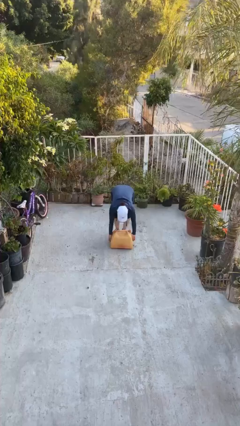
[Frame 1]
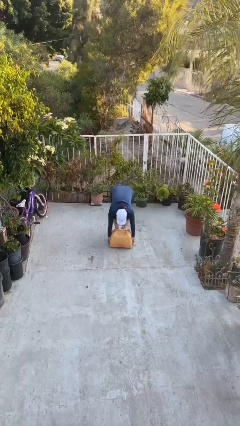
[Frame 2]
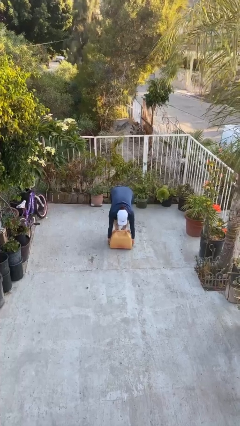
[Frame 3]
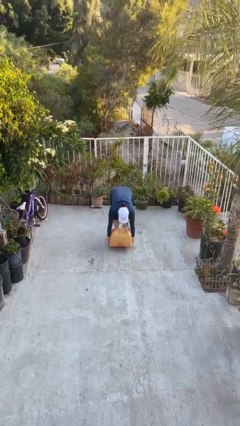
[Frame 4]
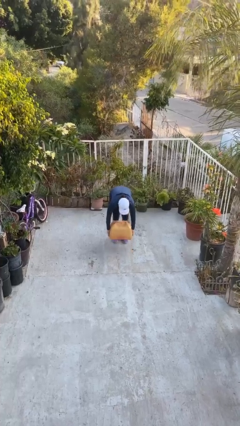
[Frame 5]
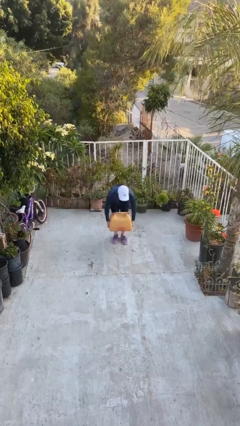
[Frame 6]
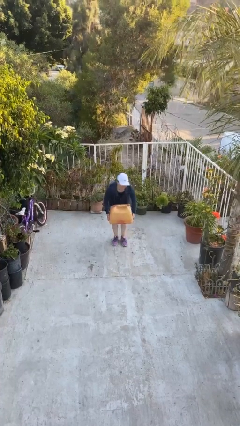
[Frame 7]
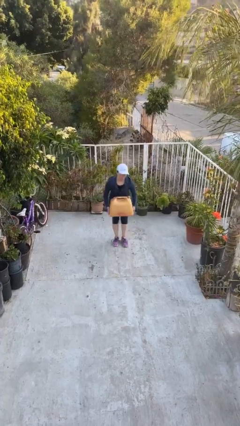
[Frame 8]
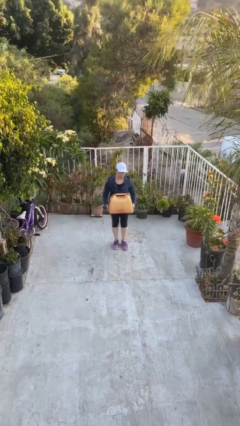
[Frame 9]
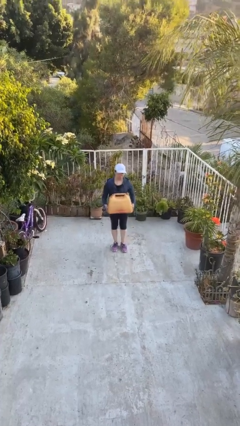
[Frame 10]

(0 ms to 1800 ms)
person picks up object from floor

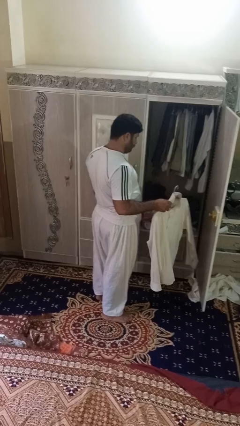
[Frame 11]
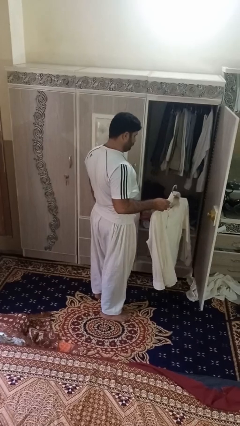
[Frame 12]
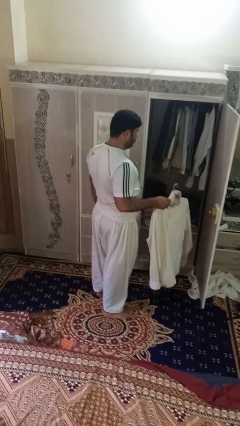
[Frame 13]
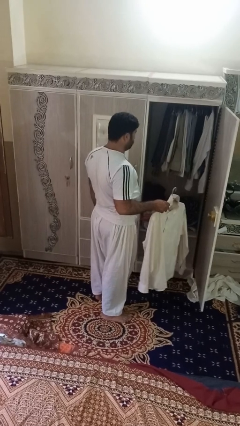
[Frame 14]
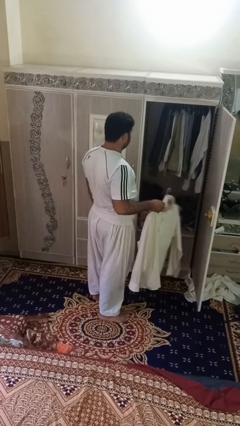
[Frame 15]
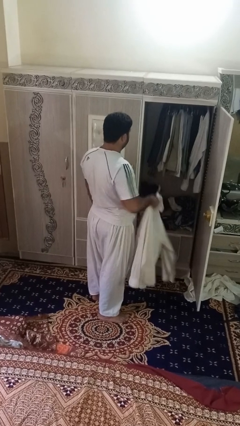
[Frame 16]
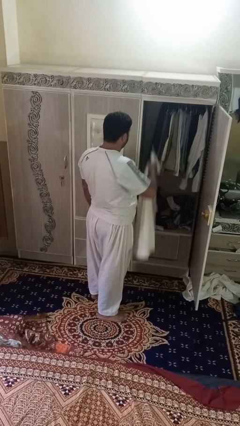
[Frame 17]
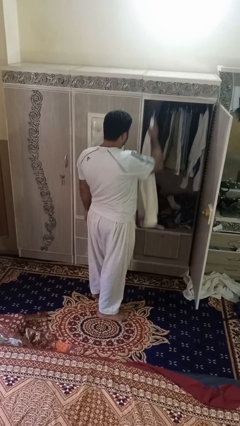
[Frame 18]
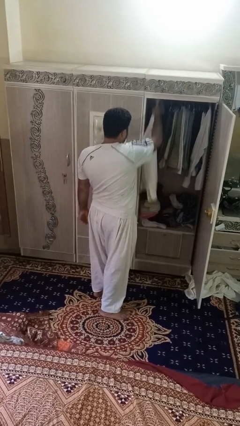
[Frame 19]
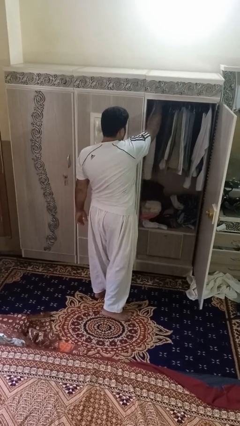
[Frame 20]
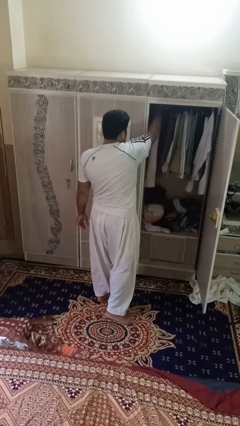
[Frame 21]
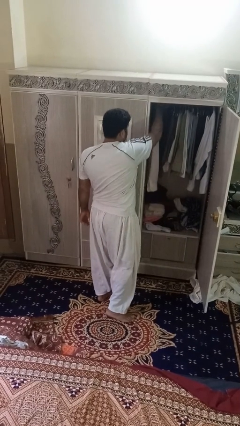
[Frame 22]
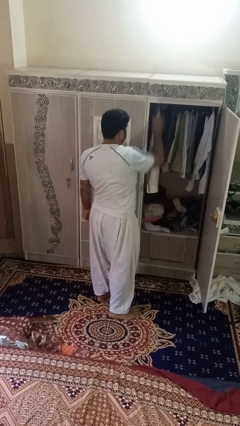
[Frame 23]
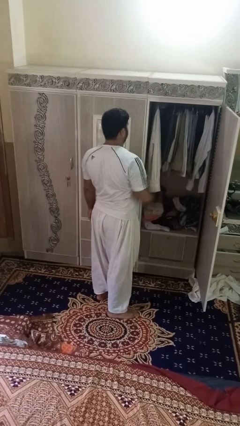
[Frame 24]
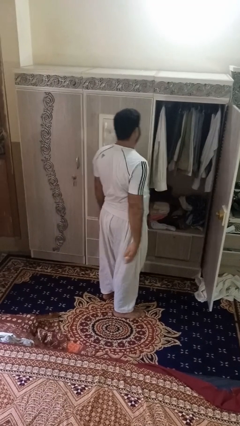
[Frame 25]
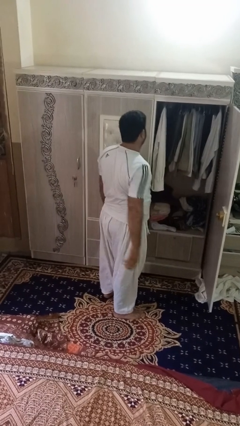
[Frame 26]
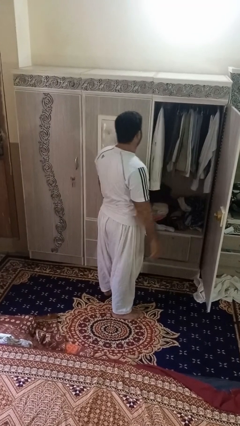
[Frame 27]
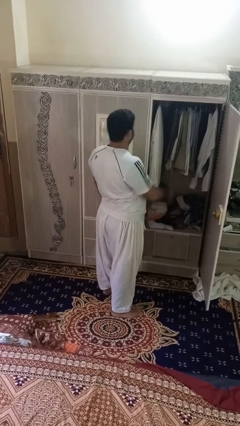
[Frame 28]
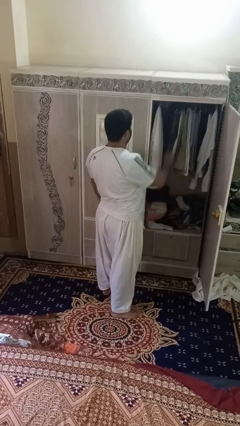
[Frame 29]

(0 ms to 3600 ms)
person puts clothes into closet

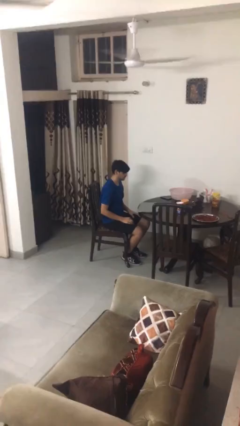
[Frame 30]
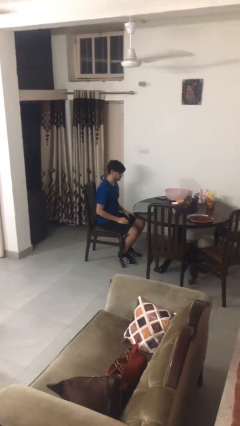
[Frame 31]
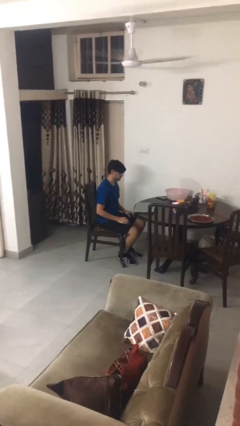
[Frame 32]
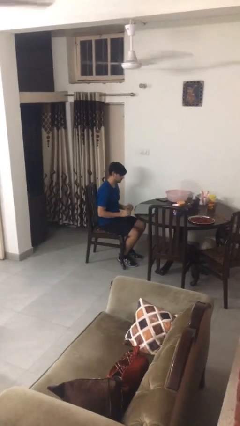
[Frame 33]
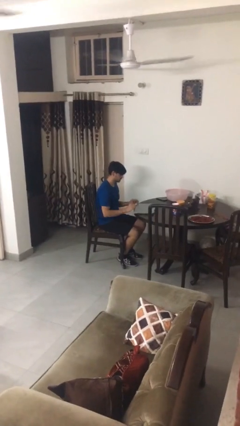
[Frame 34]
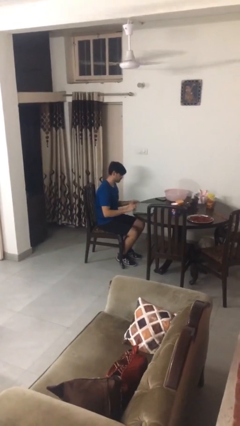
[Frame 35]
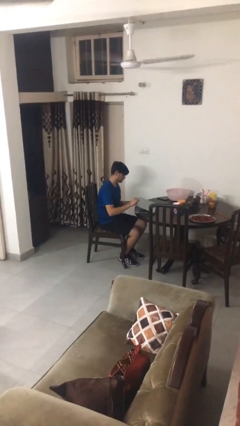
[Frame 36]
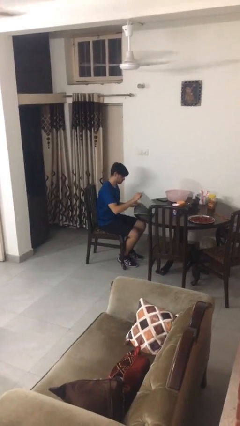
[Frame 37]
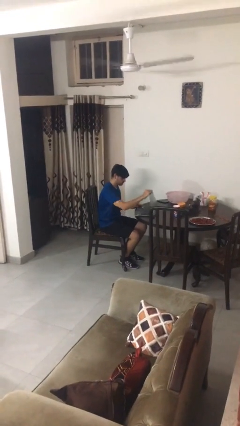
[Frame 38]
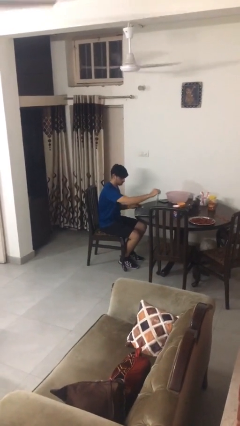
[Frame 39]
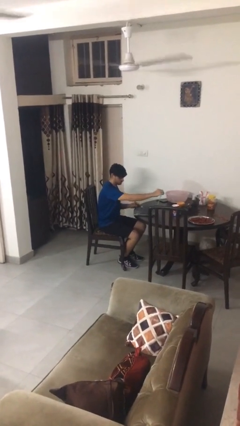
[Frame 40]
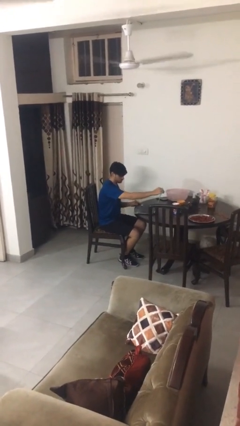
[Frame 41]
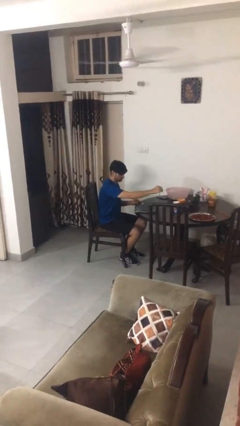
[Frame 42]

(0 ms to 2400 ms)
person opens laptop

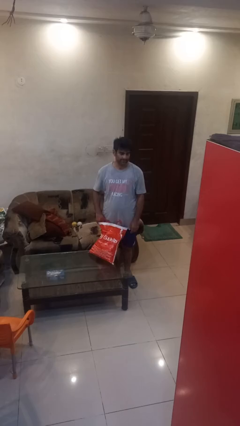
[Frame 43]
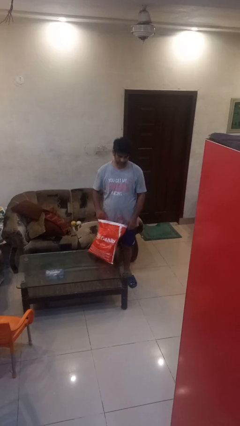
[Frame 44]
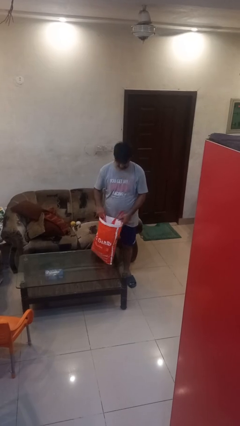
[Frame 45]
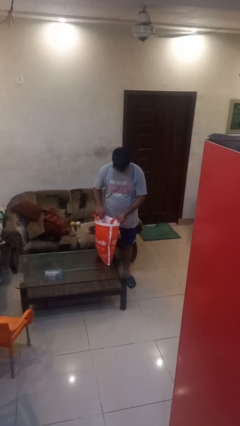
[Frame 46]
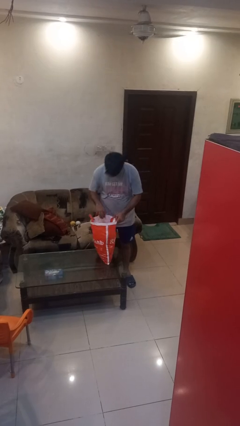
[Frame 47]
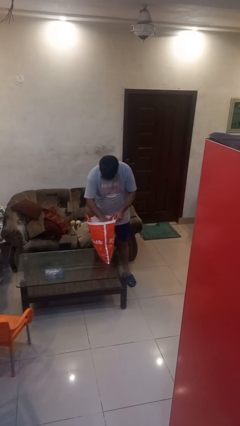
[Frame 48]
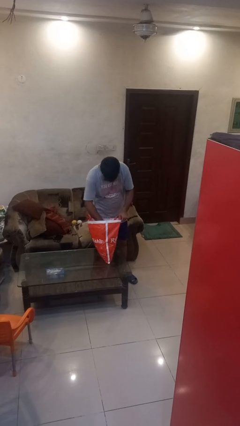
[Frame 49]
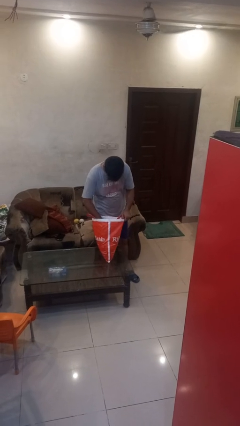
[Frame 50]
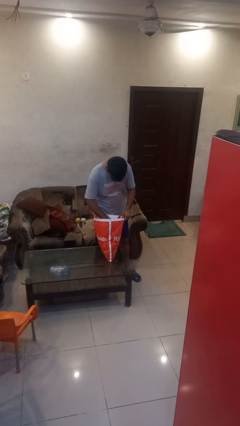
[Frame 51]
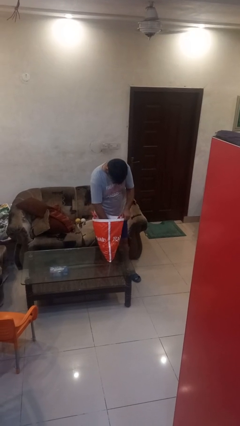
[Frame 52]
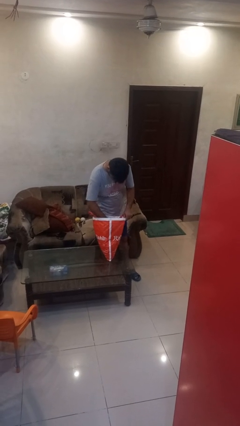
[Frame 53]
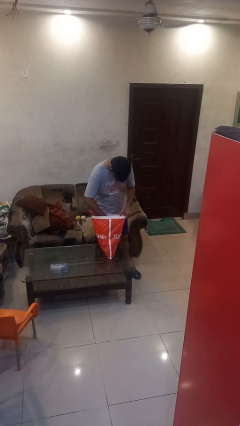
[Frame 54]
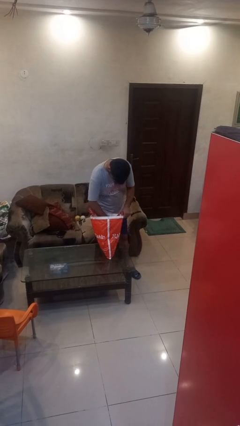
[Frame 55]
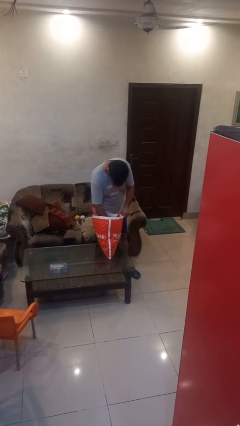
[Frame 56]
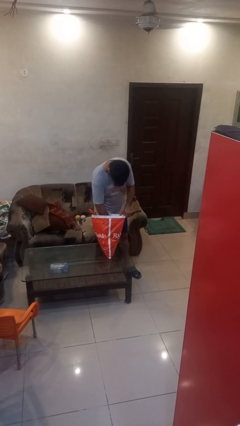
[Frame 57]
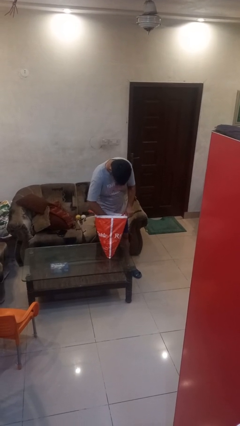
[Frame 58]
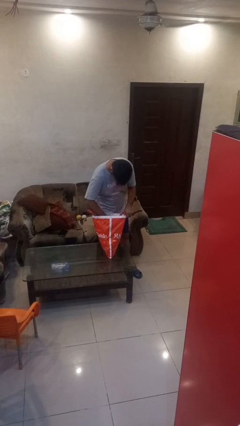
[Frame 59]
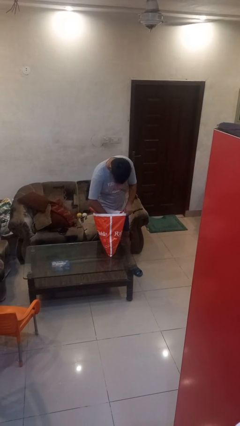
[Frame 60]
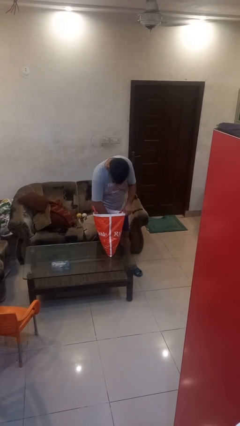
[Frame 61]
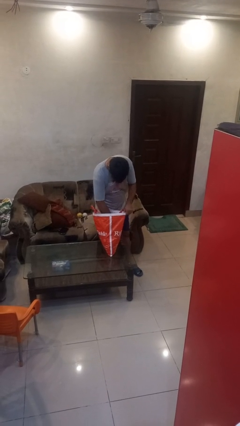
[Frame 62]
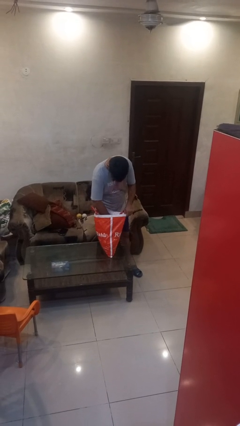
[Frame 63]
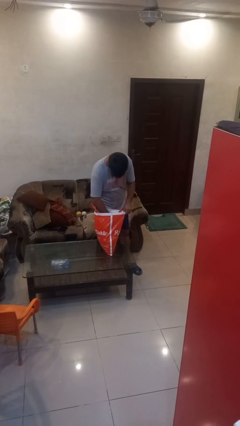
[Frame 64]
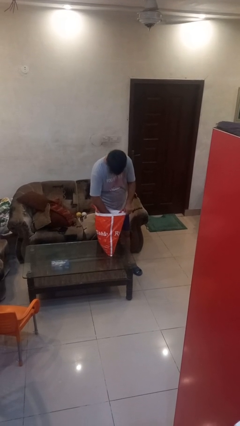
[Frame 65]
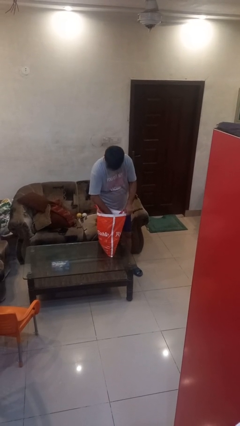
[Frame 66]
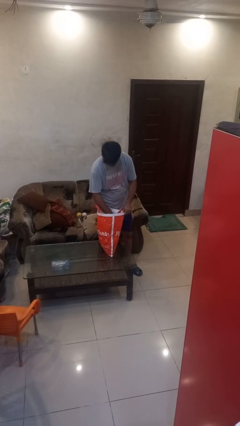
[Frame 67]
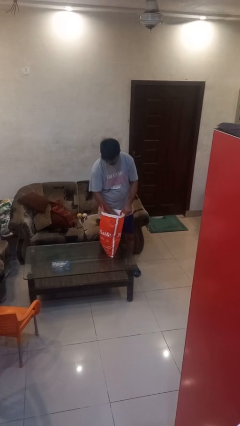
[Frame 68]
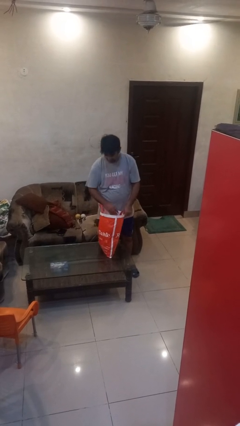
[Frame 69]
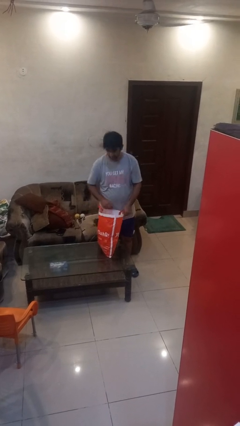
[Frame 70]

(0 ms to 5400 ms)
person searches in bag

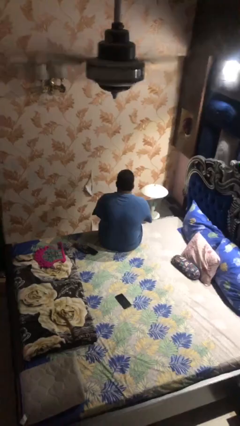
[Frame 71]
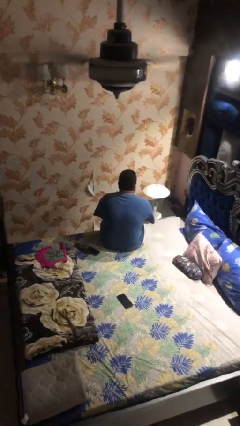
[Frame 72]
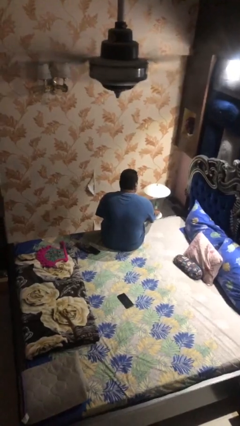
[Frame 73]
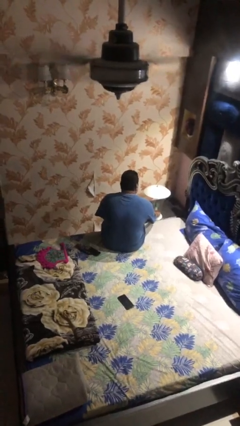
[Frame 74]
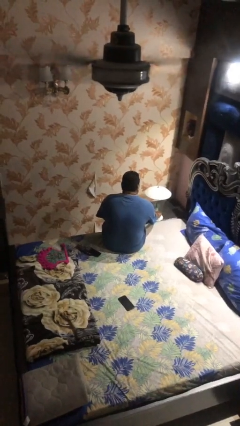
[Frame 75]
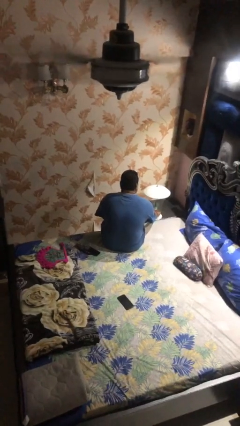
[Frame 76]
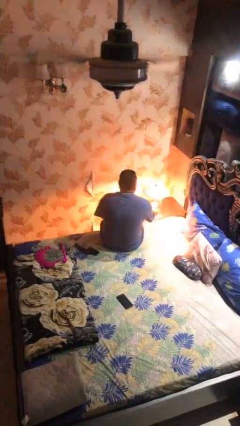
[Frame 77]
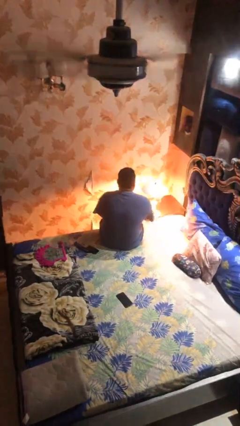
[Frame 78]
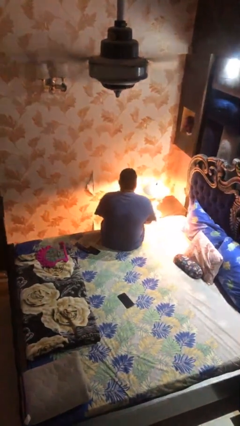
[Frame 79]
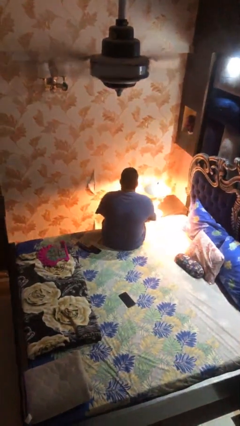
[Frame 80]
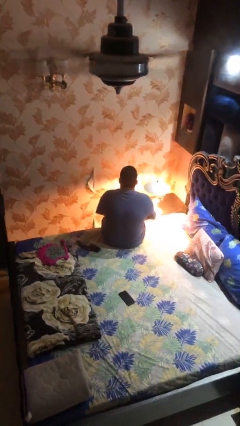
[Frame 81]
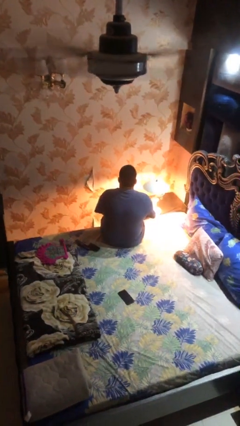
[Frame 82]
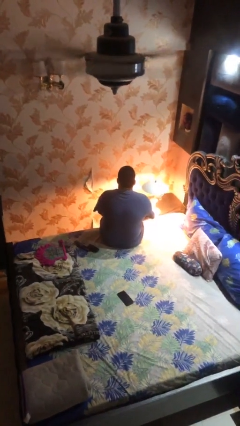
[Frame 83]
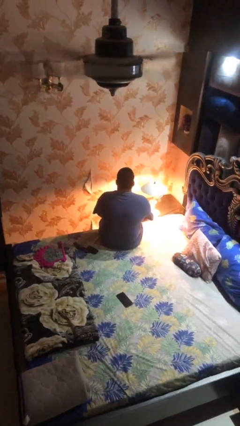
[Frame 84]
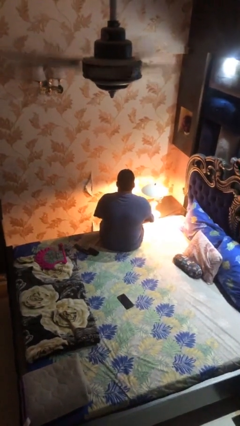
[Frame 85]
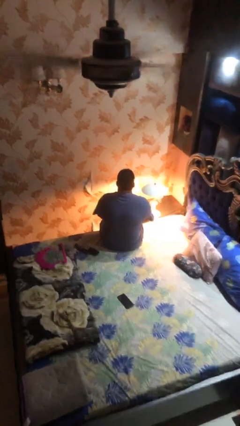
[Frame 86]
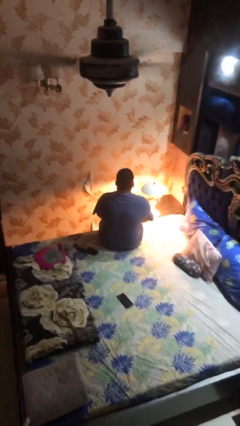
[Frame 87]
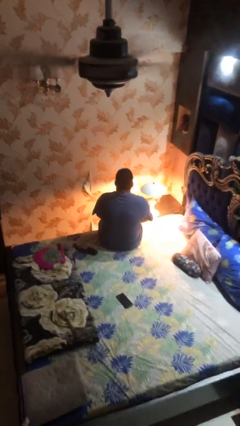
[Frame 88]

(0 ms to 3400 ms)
person turns on lamp

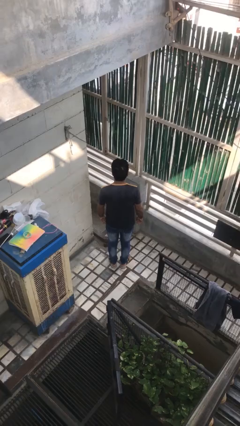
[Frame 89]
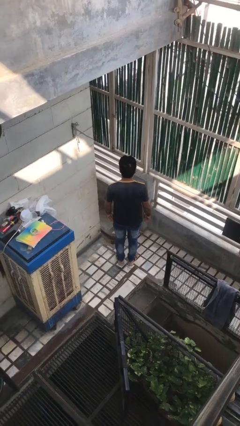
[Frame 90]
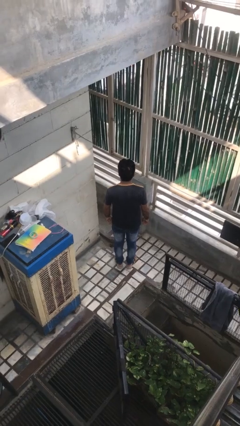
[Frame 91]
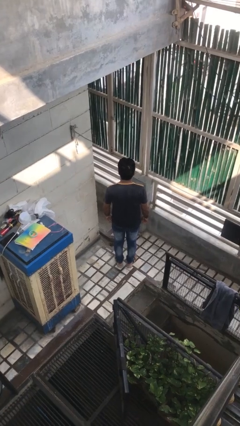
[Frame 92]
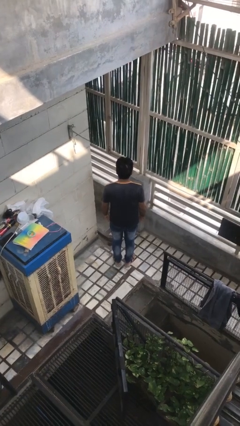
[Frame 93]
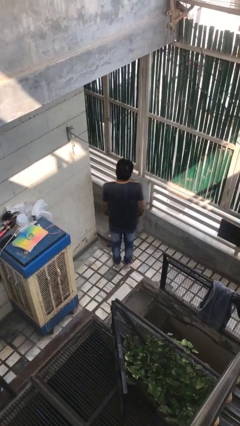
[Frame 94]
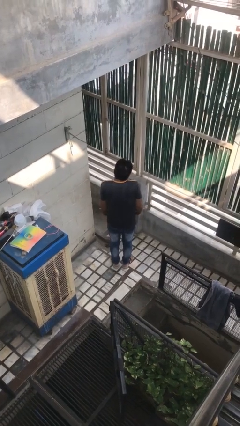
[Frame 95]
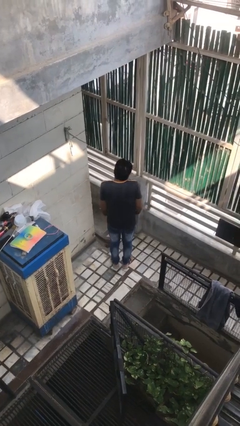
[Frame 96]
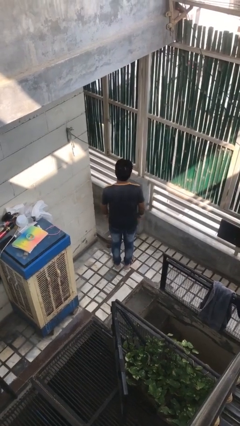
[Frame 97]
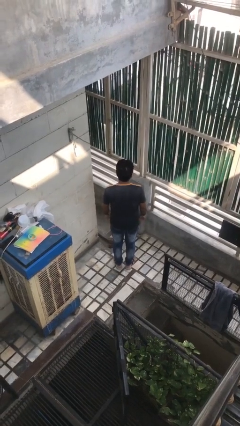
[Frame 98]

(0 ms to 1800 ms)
person shrugs
